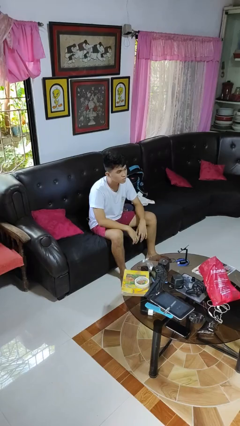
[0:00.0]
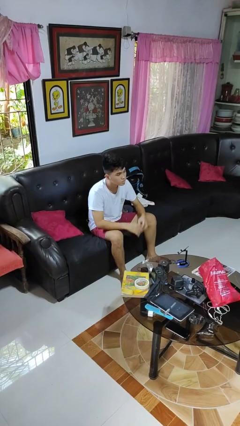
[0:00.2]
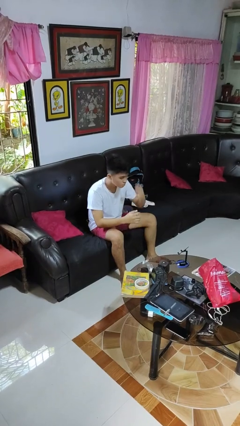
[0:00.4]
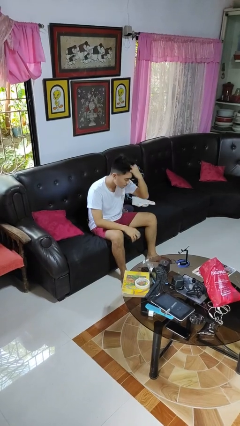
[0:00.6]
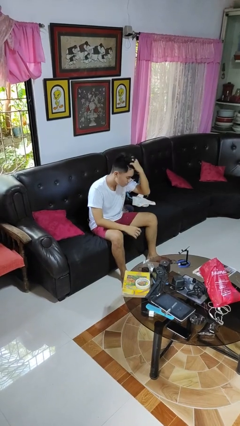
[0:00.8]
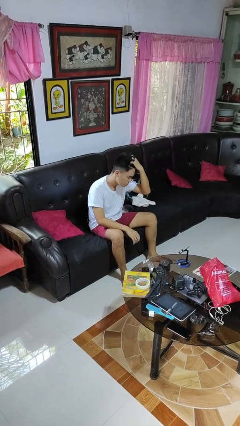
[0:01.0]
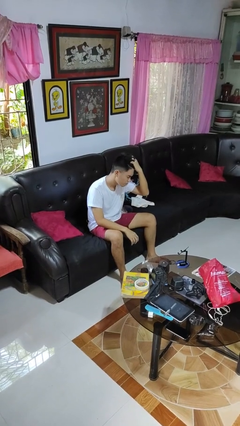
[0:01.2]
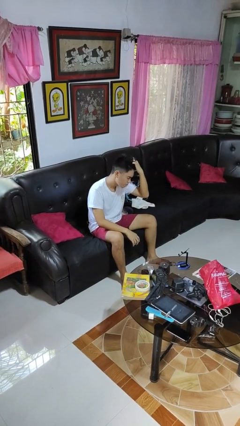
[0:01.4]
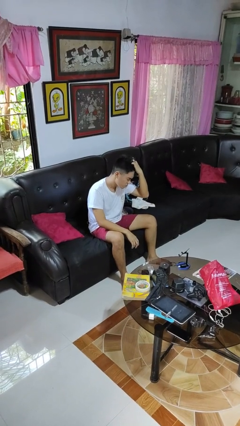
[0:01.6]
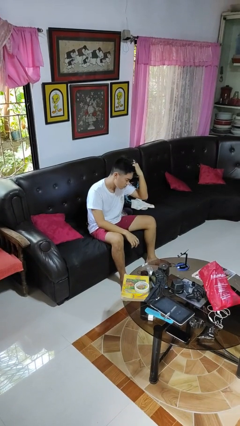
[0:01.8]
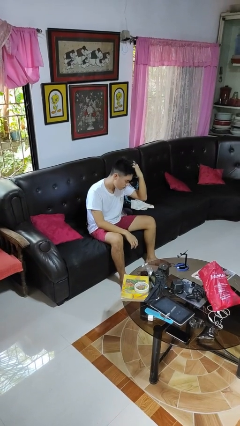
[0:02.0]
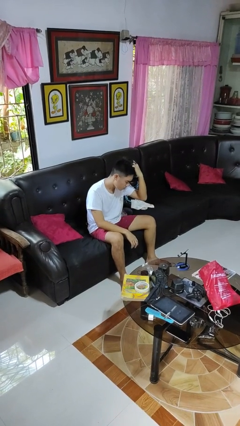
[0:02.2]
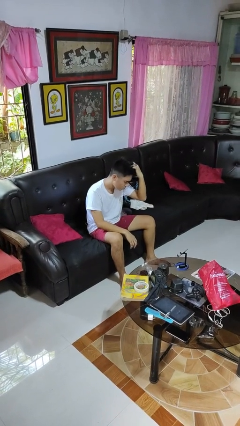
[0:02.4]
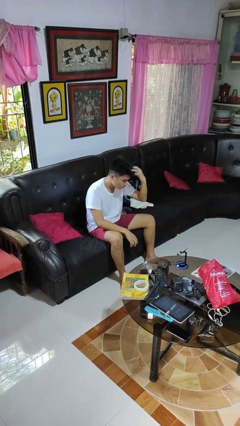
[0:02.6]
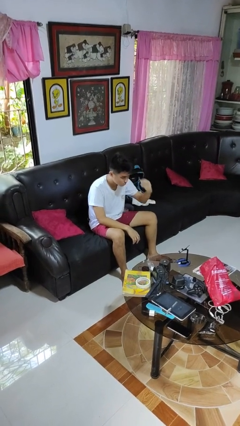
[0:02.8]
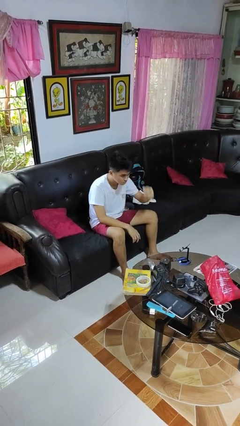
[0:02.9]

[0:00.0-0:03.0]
person scratches face

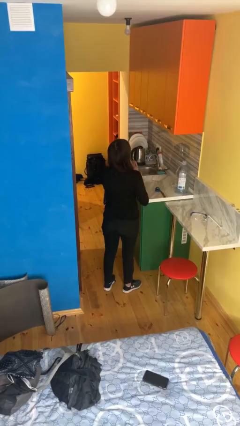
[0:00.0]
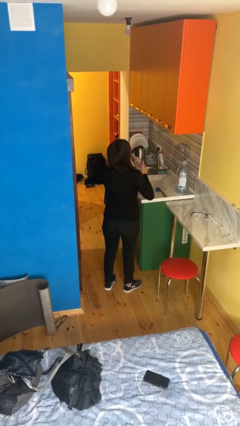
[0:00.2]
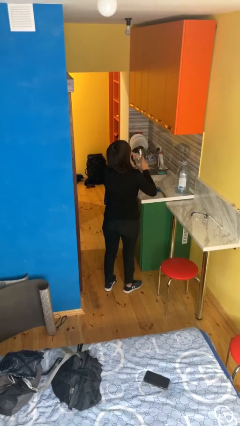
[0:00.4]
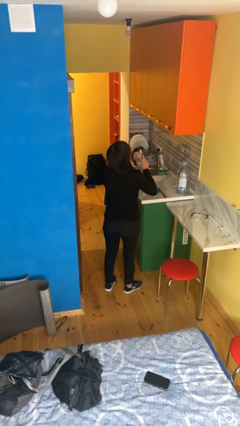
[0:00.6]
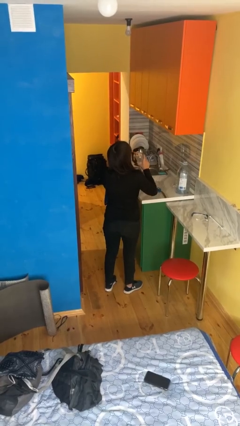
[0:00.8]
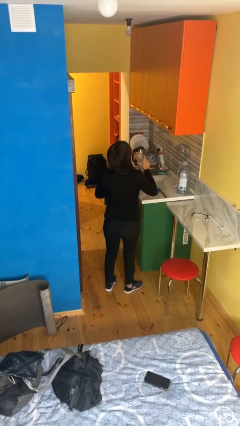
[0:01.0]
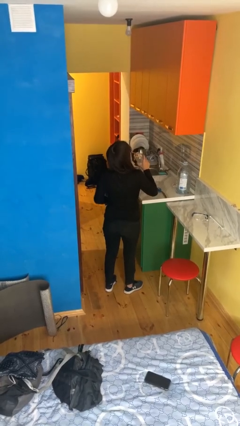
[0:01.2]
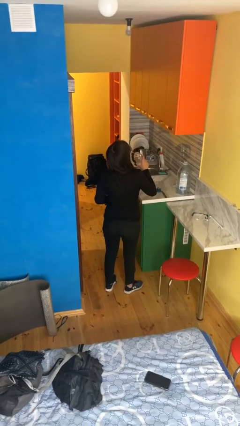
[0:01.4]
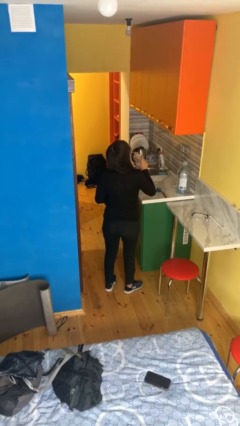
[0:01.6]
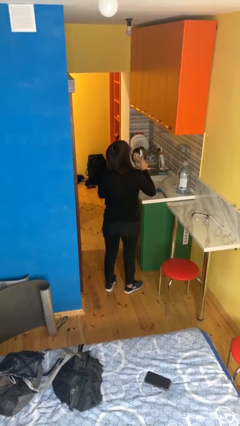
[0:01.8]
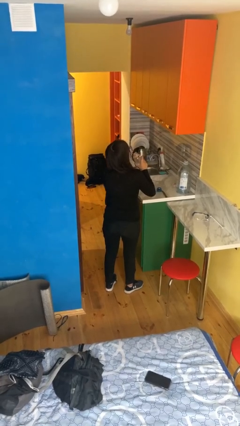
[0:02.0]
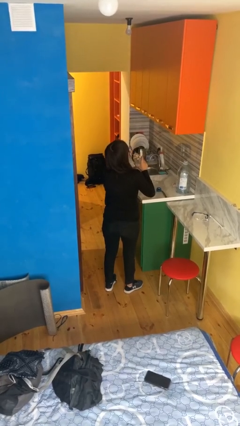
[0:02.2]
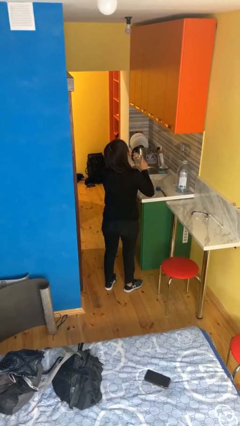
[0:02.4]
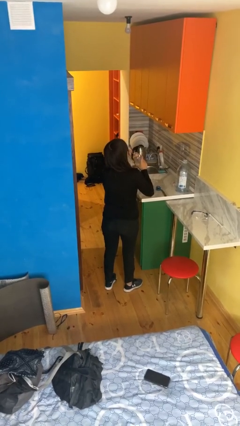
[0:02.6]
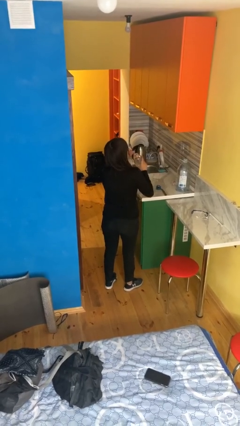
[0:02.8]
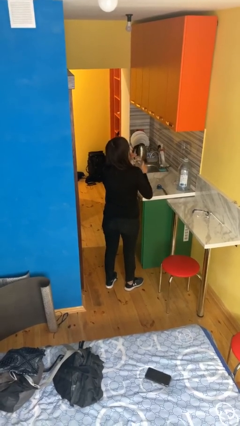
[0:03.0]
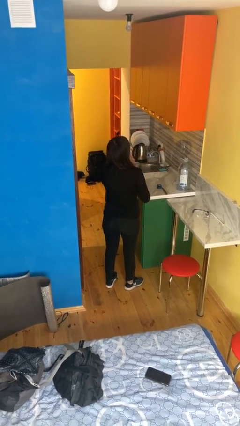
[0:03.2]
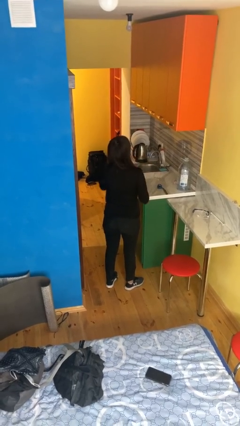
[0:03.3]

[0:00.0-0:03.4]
person drinks from straw

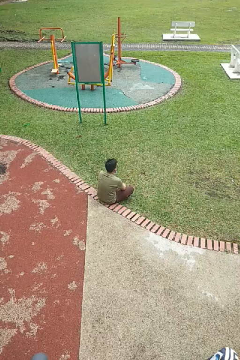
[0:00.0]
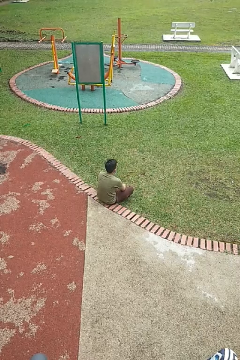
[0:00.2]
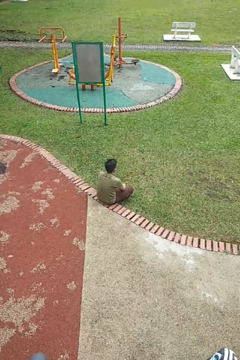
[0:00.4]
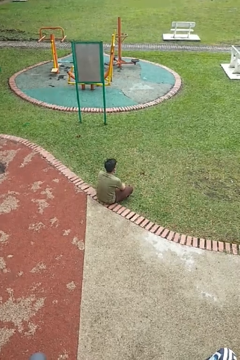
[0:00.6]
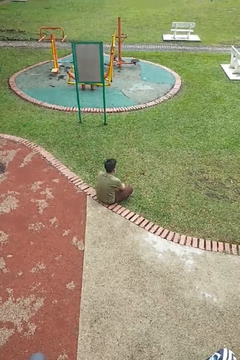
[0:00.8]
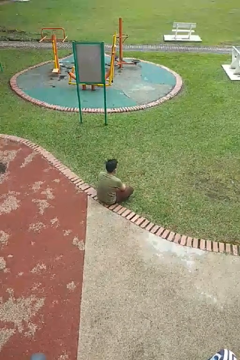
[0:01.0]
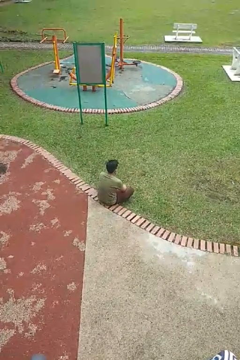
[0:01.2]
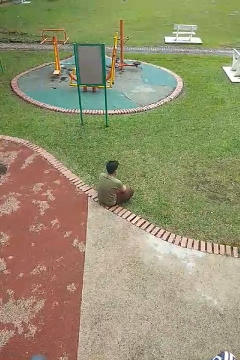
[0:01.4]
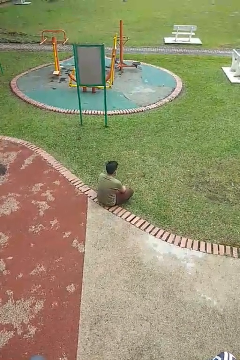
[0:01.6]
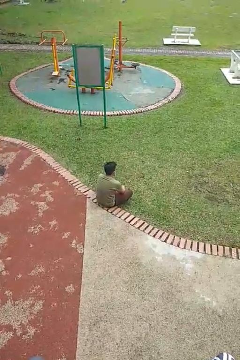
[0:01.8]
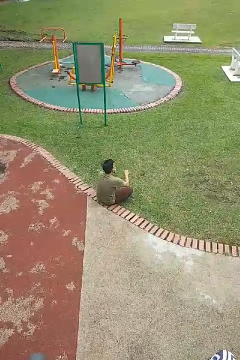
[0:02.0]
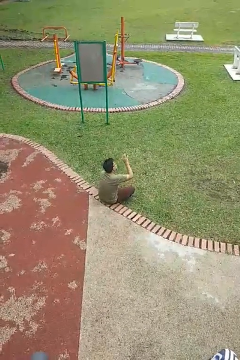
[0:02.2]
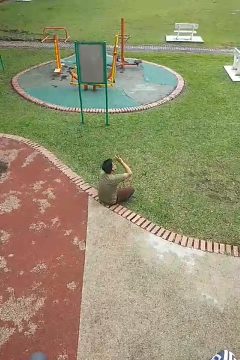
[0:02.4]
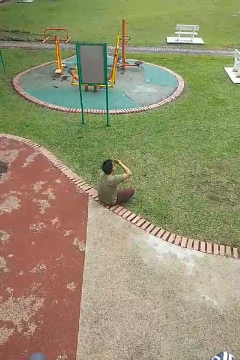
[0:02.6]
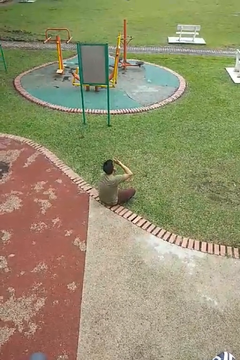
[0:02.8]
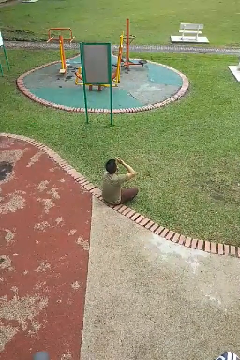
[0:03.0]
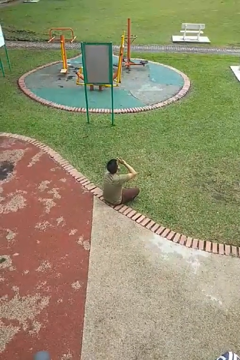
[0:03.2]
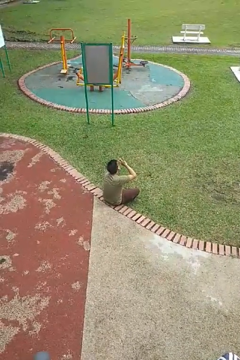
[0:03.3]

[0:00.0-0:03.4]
person shades eyes

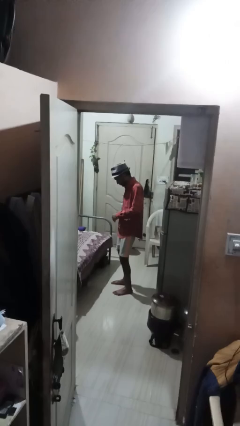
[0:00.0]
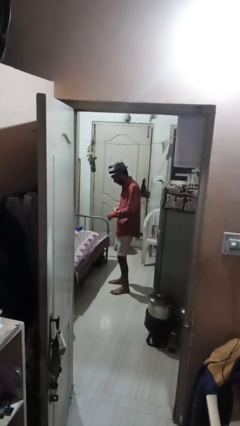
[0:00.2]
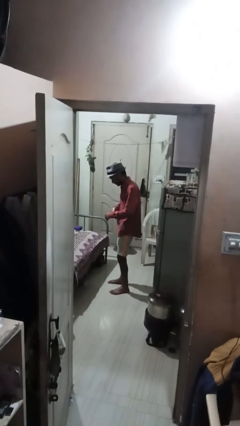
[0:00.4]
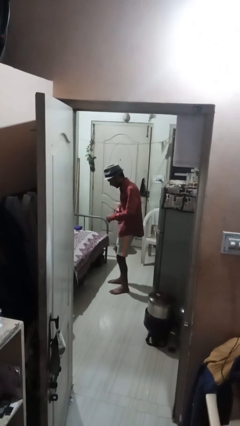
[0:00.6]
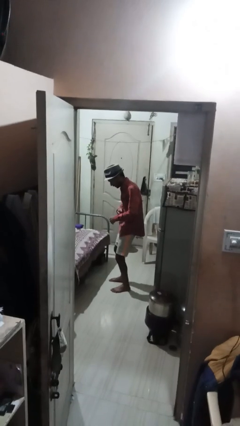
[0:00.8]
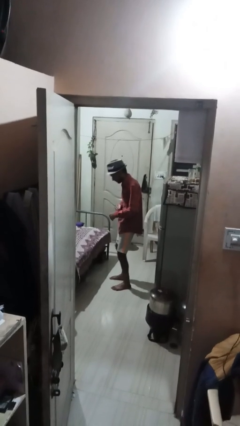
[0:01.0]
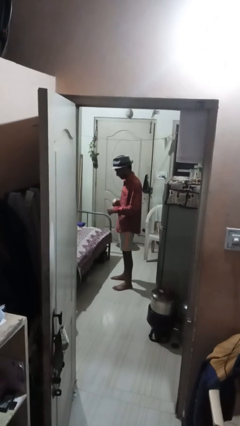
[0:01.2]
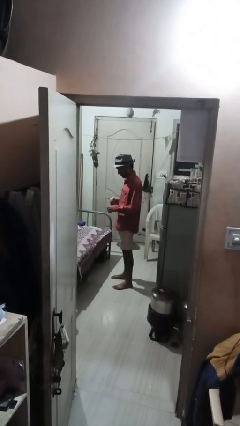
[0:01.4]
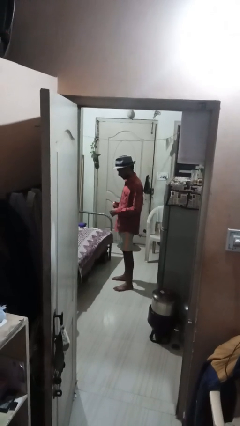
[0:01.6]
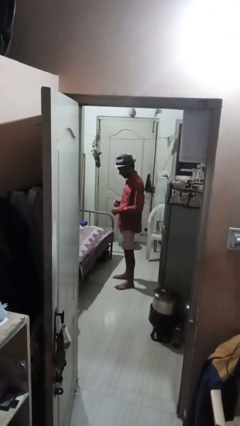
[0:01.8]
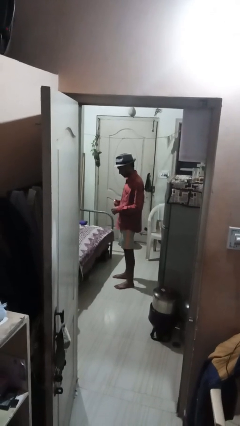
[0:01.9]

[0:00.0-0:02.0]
person applies deodorant

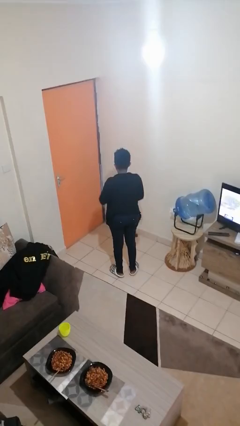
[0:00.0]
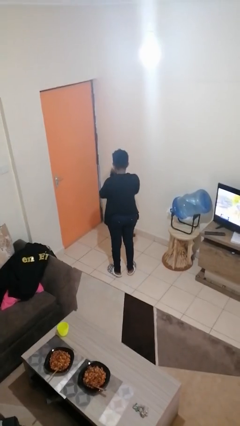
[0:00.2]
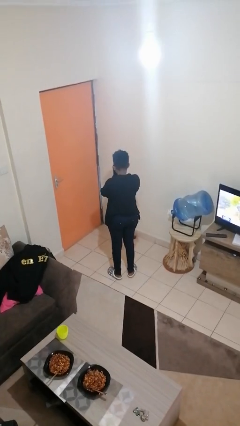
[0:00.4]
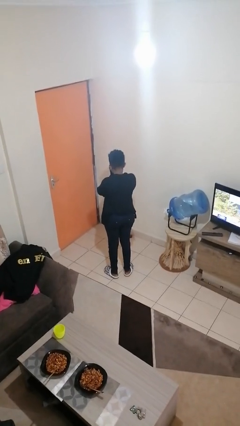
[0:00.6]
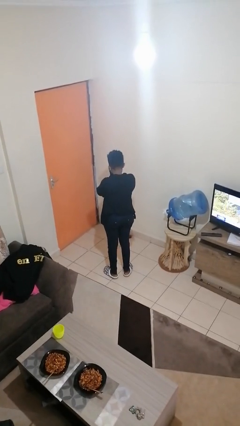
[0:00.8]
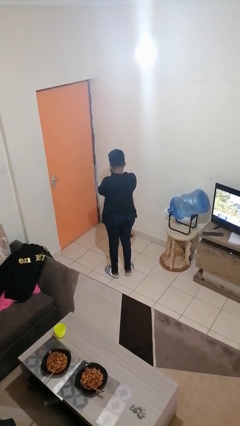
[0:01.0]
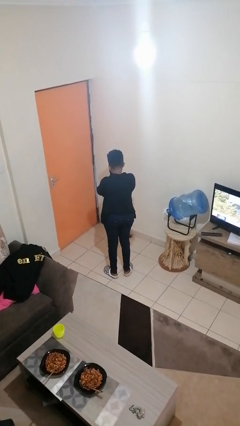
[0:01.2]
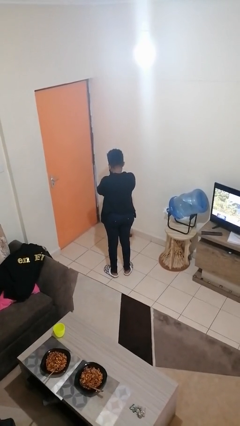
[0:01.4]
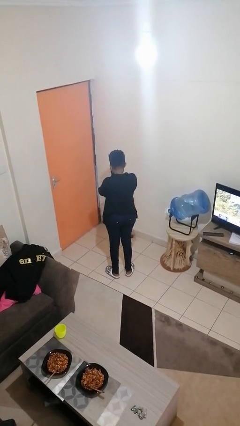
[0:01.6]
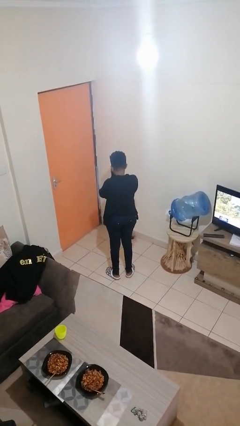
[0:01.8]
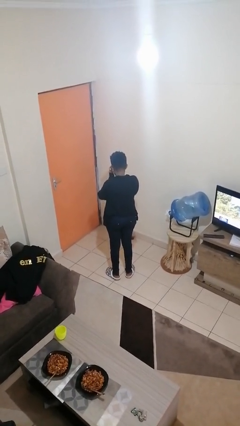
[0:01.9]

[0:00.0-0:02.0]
person covers face with hands

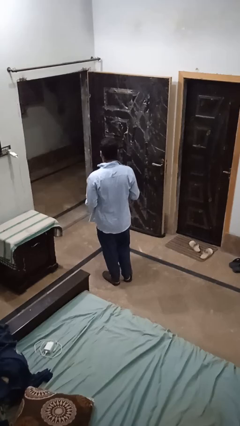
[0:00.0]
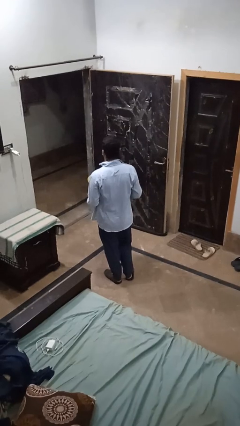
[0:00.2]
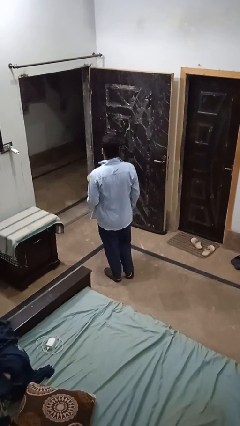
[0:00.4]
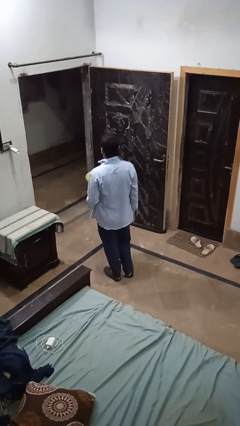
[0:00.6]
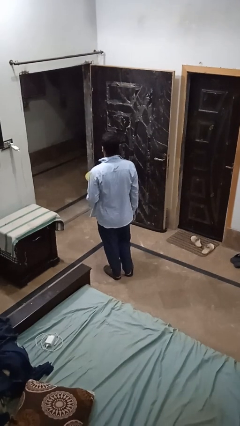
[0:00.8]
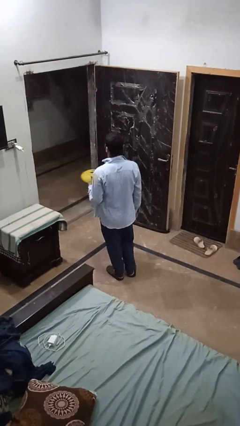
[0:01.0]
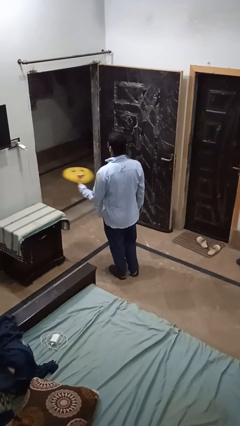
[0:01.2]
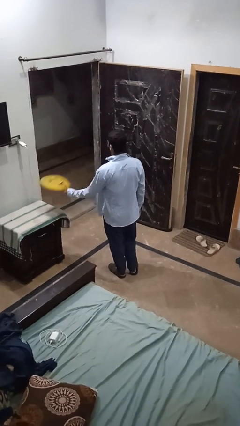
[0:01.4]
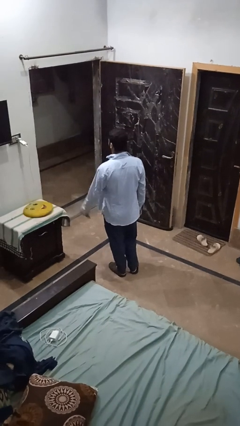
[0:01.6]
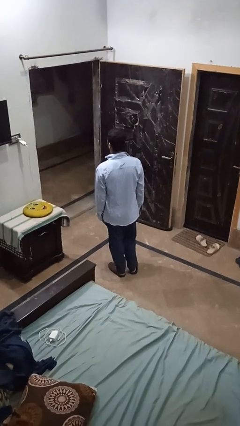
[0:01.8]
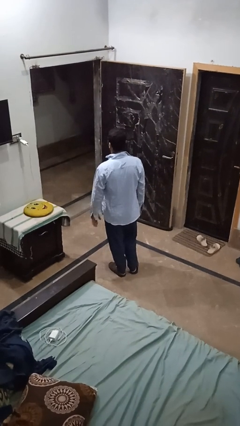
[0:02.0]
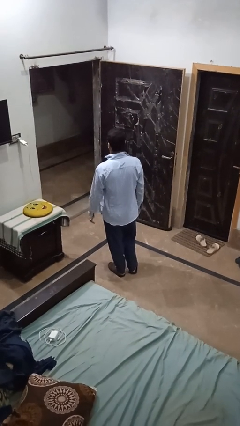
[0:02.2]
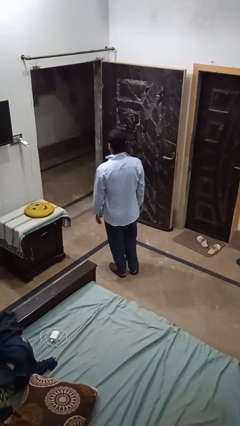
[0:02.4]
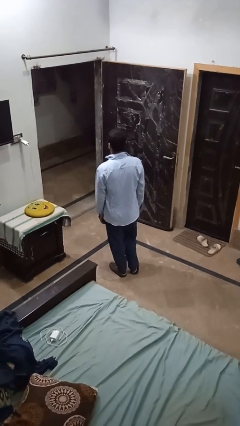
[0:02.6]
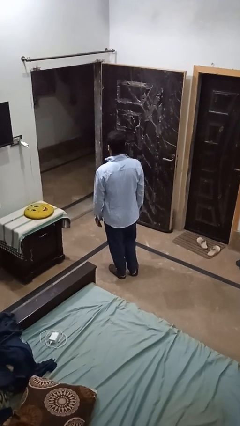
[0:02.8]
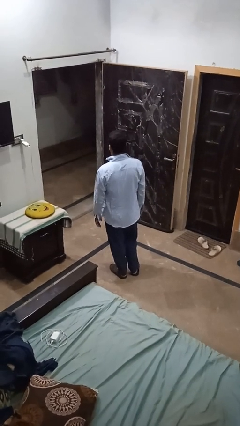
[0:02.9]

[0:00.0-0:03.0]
person throws object on table

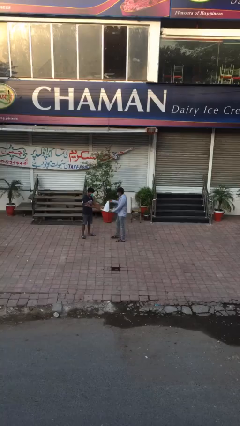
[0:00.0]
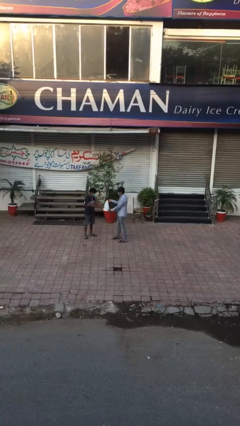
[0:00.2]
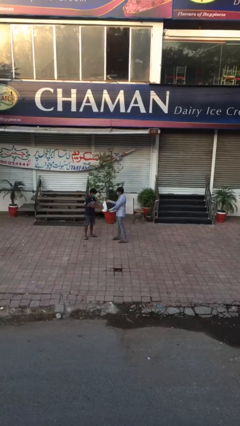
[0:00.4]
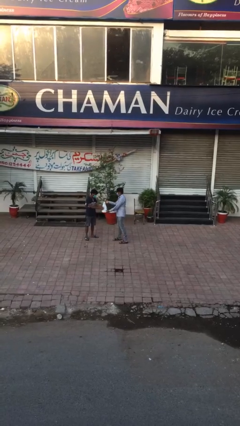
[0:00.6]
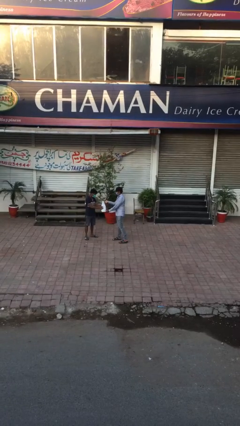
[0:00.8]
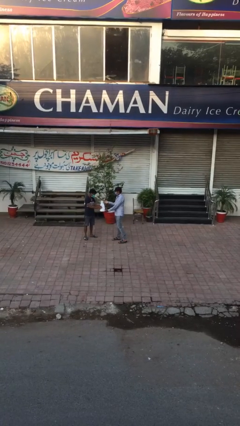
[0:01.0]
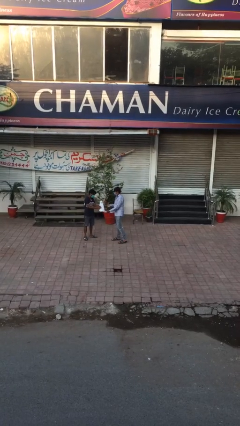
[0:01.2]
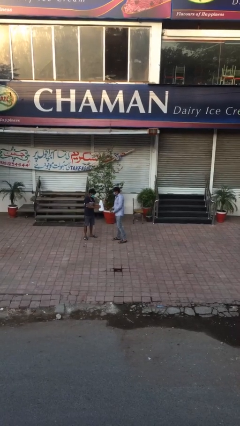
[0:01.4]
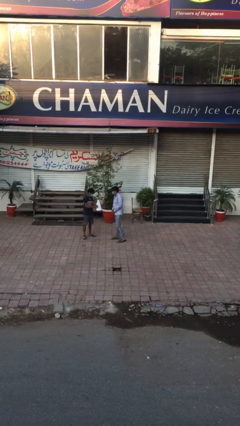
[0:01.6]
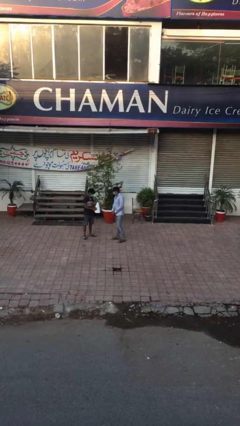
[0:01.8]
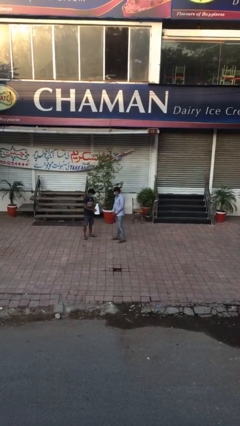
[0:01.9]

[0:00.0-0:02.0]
person transfers object to person
